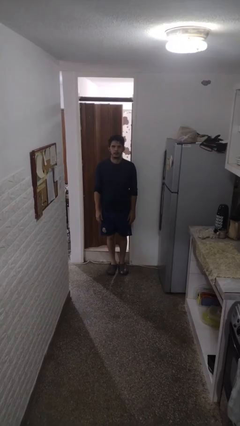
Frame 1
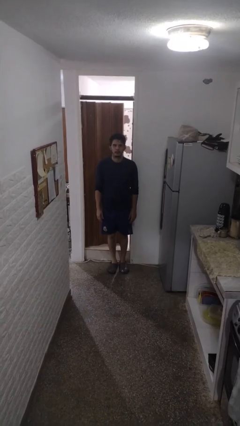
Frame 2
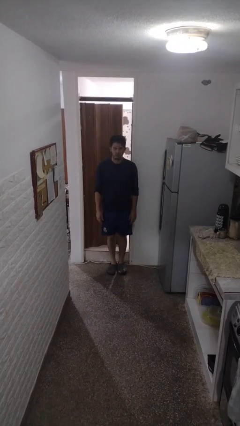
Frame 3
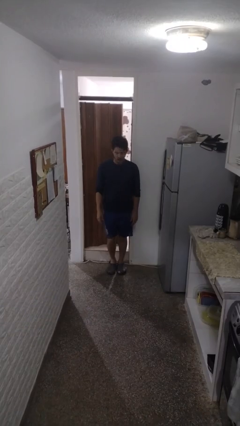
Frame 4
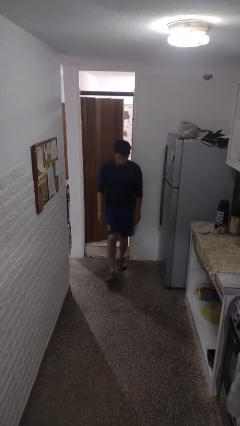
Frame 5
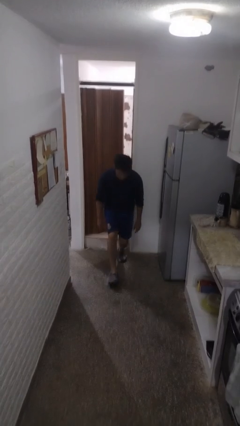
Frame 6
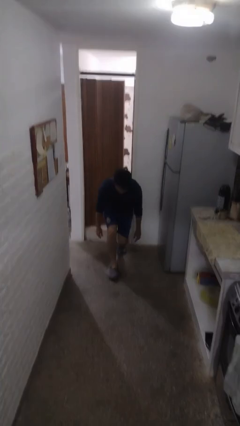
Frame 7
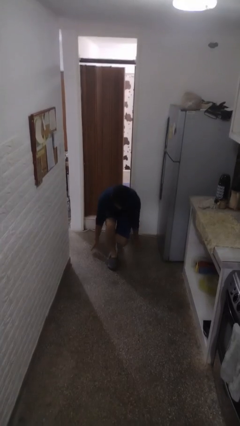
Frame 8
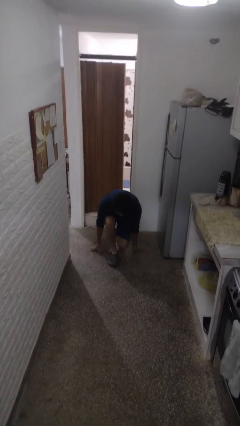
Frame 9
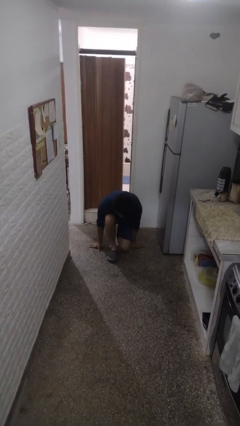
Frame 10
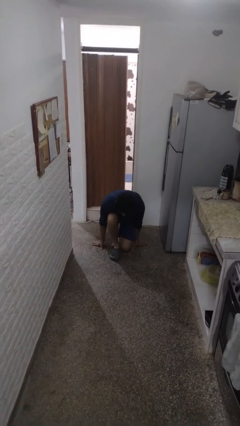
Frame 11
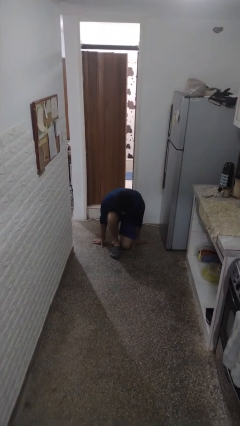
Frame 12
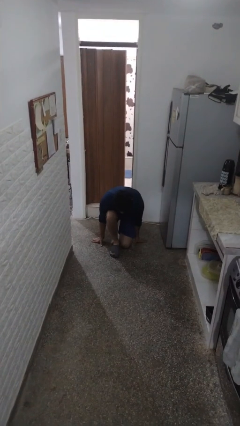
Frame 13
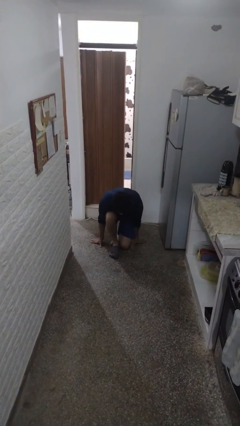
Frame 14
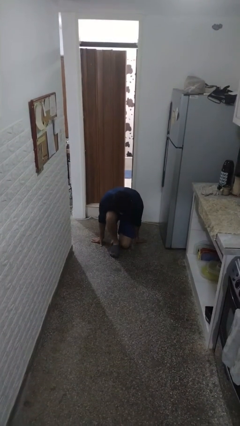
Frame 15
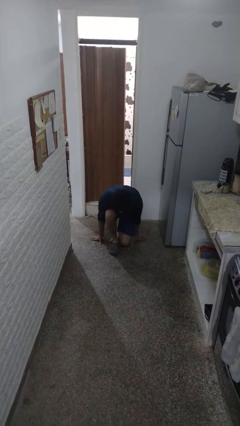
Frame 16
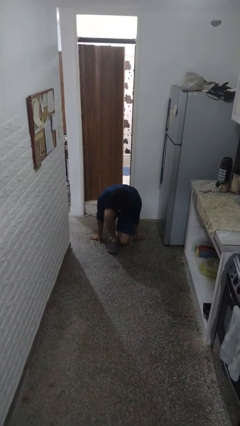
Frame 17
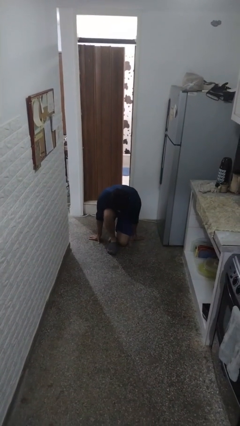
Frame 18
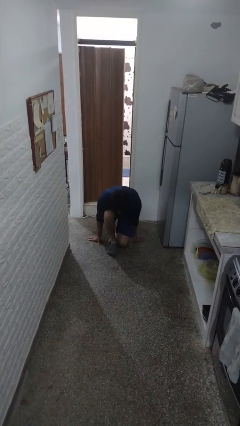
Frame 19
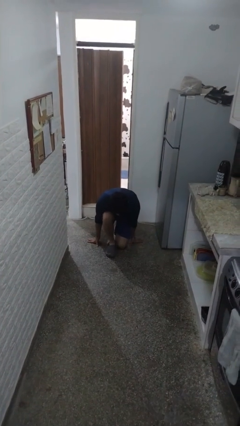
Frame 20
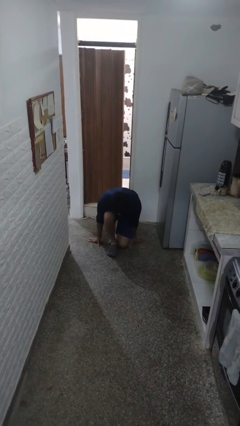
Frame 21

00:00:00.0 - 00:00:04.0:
person kneels

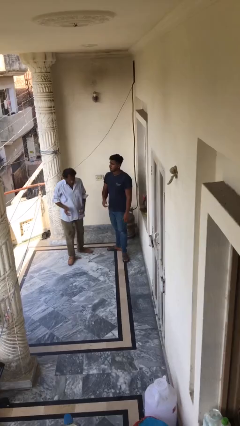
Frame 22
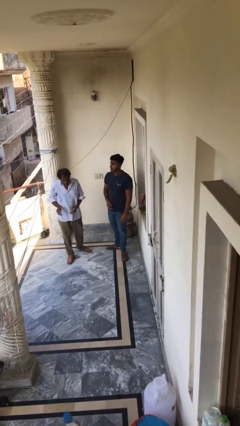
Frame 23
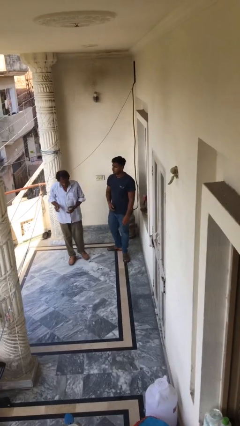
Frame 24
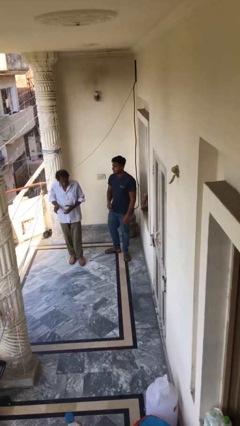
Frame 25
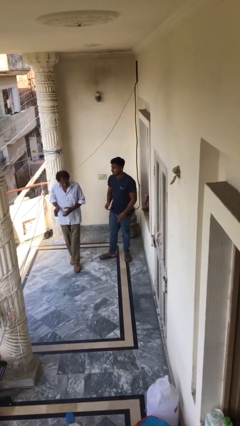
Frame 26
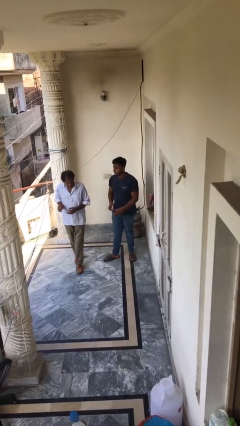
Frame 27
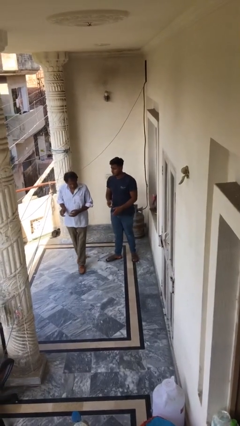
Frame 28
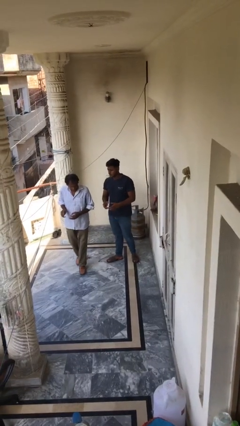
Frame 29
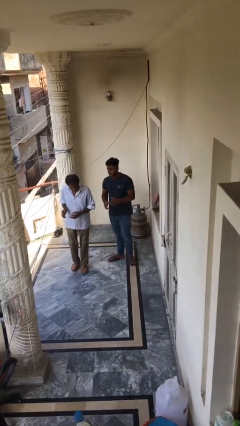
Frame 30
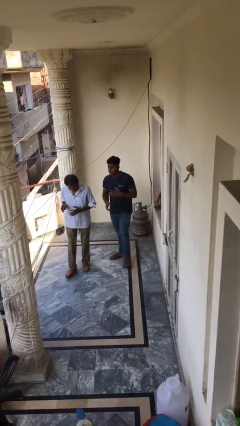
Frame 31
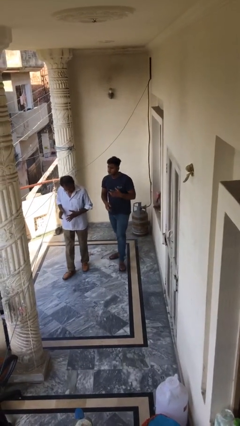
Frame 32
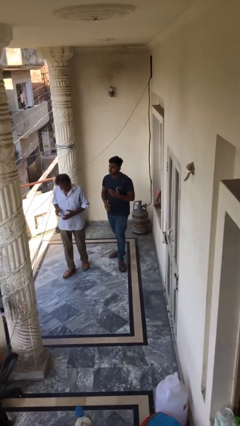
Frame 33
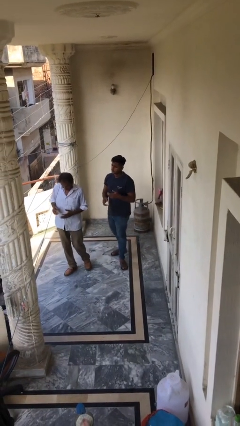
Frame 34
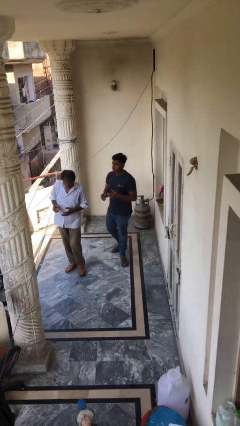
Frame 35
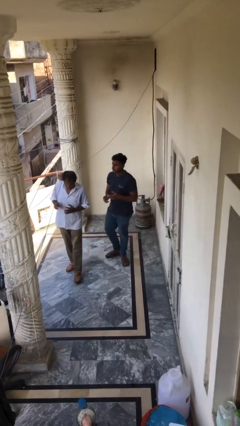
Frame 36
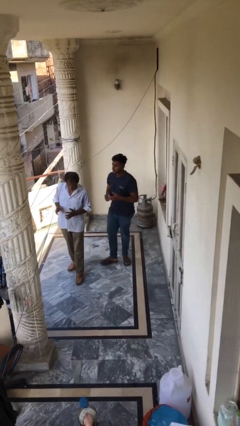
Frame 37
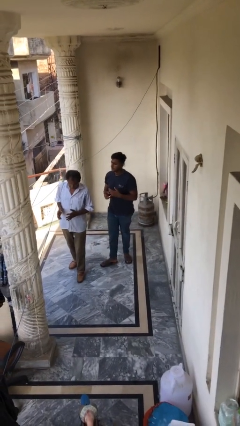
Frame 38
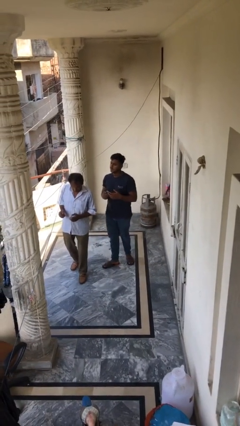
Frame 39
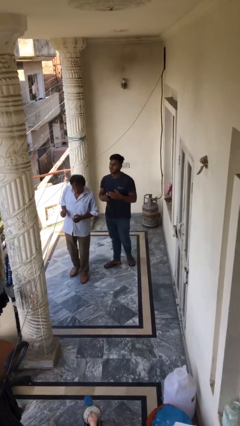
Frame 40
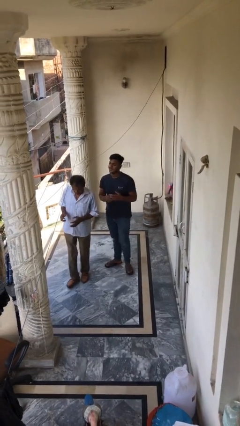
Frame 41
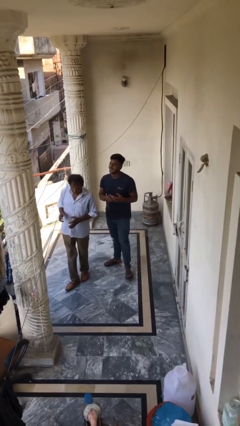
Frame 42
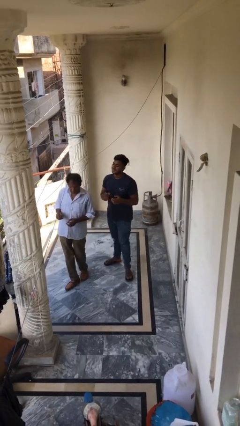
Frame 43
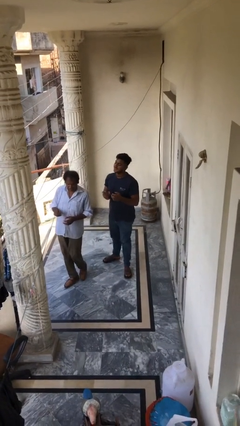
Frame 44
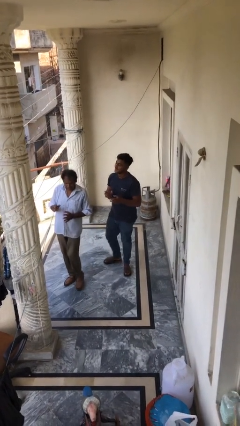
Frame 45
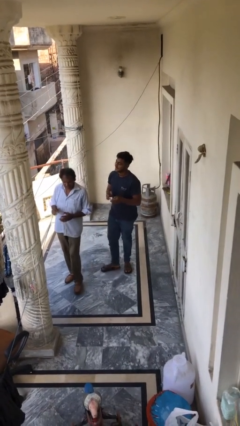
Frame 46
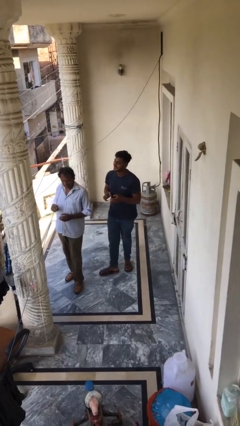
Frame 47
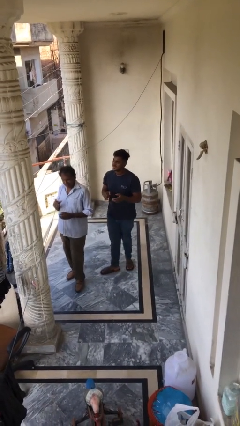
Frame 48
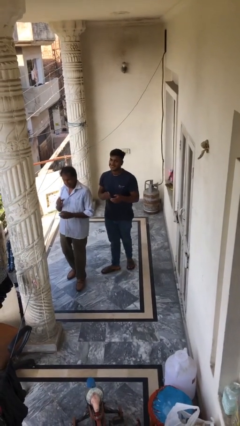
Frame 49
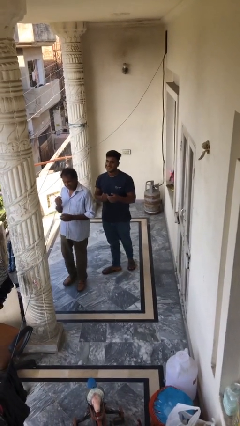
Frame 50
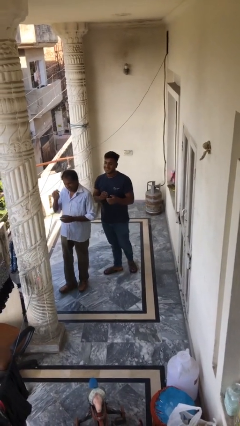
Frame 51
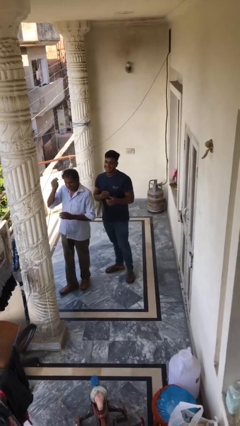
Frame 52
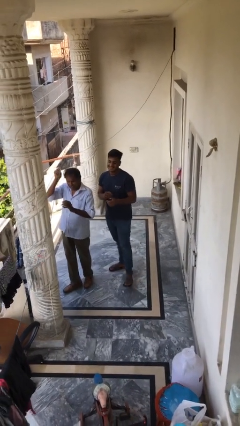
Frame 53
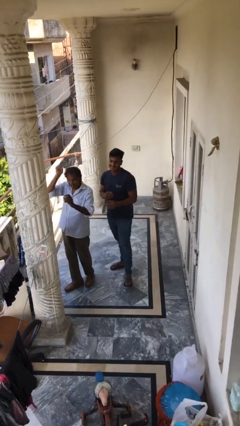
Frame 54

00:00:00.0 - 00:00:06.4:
person talks to person

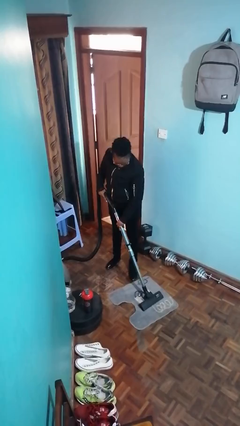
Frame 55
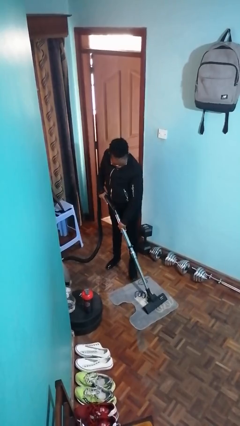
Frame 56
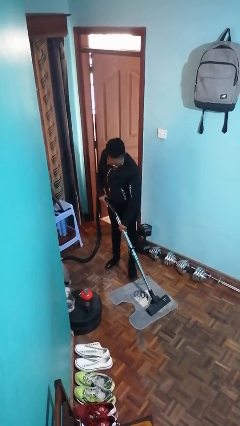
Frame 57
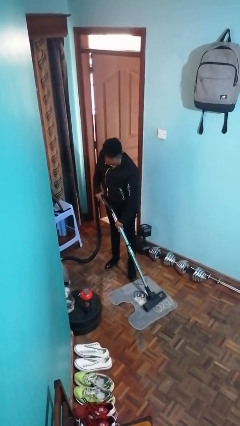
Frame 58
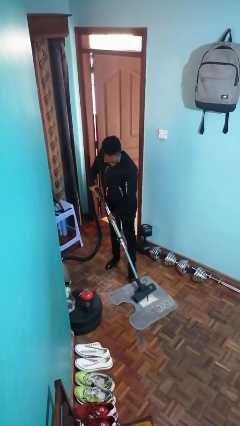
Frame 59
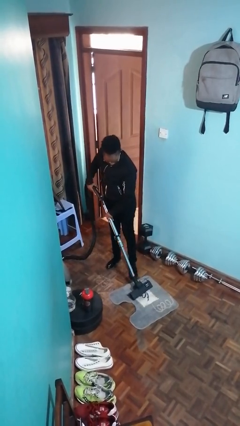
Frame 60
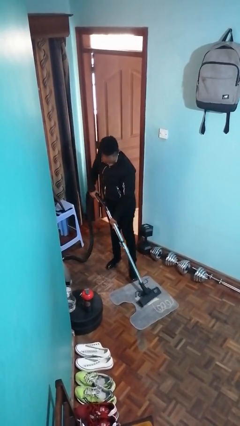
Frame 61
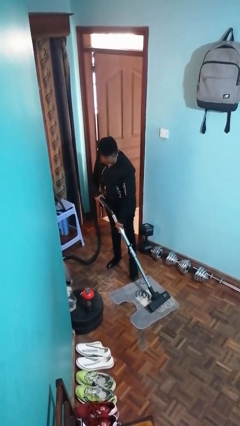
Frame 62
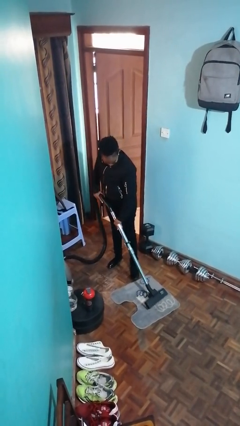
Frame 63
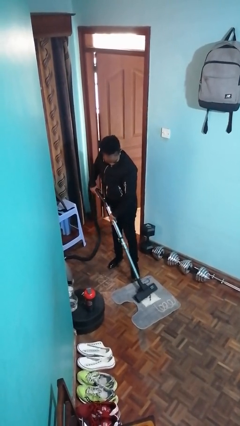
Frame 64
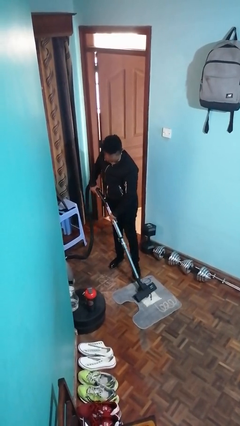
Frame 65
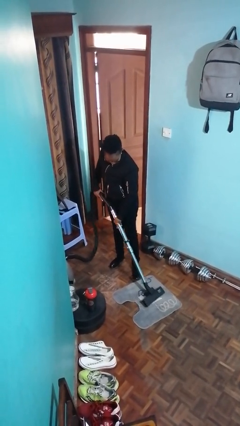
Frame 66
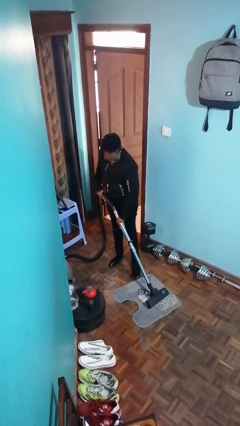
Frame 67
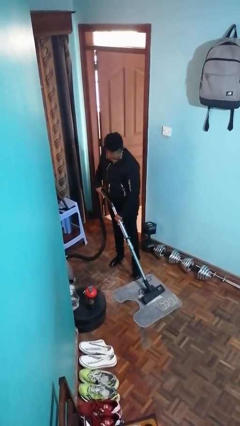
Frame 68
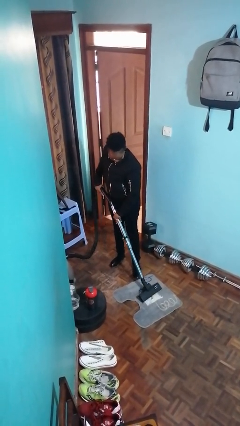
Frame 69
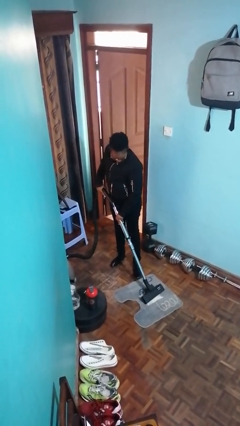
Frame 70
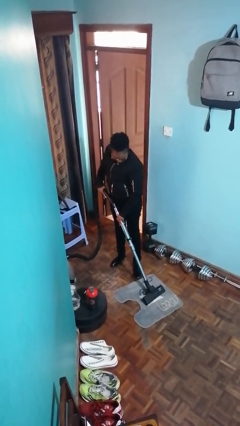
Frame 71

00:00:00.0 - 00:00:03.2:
person vacuums carpet

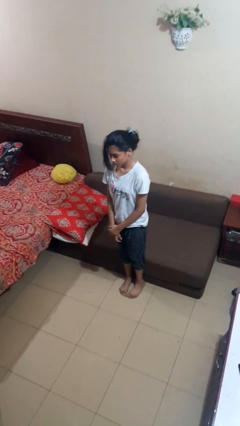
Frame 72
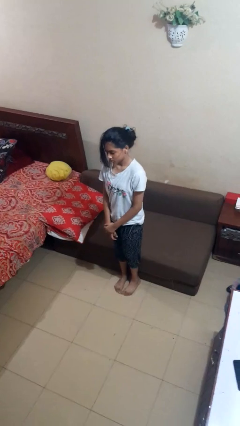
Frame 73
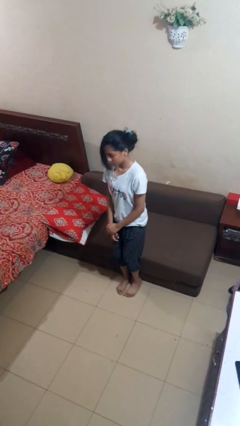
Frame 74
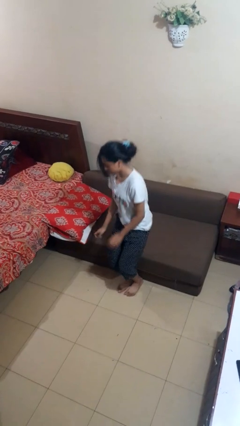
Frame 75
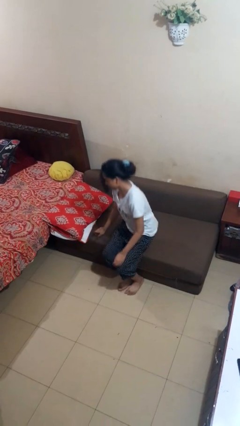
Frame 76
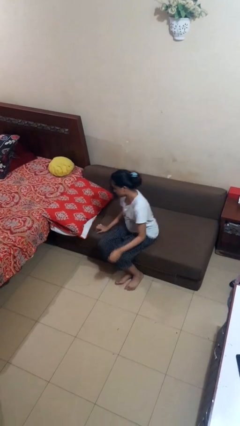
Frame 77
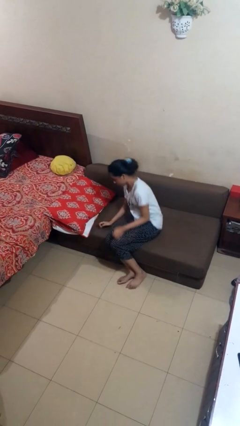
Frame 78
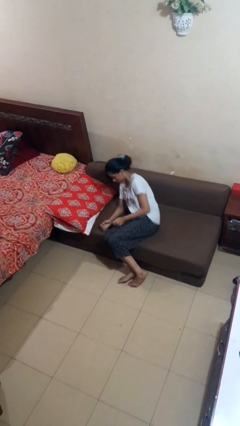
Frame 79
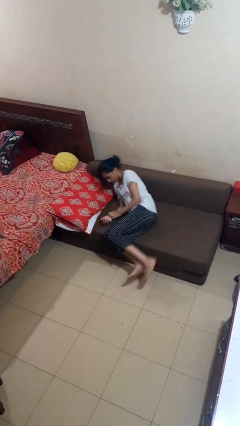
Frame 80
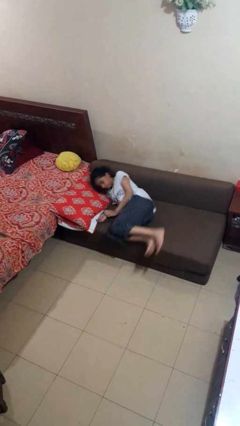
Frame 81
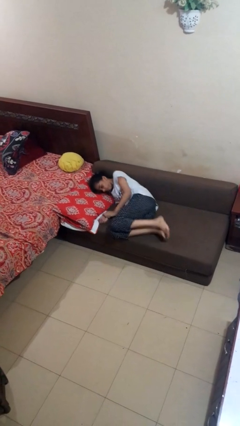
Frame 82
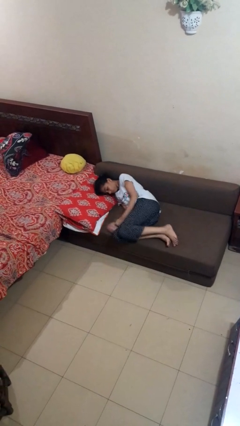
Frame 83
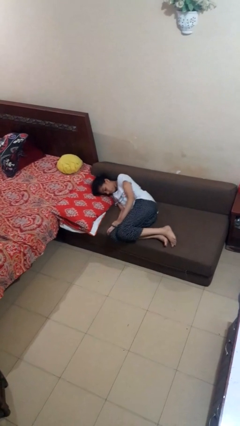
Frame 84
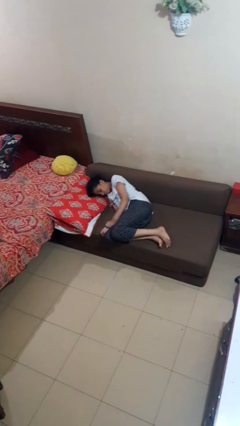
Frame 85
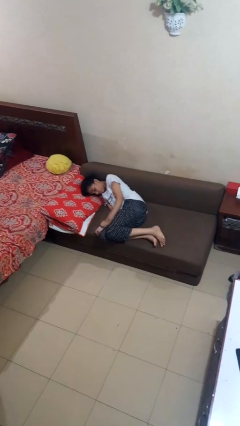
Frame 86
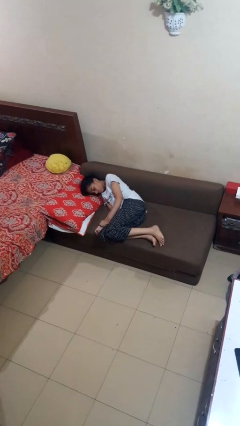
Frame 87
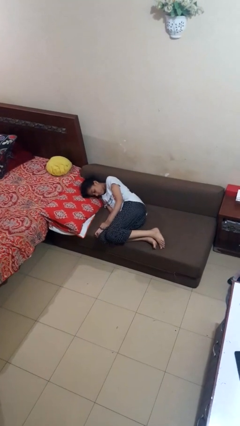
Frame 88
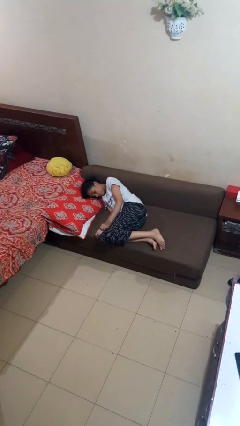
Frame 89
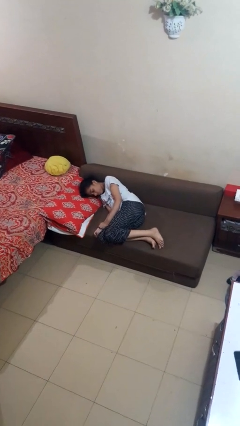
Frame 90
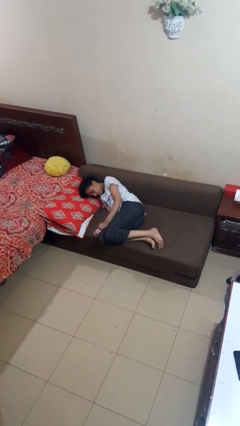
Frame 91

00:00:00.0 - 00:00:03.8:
person lies down on couch

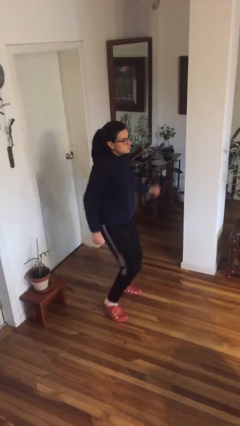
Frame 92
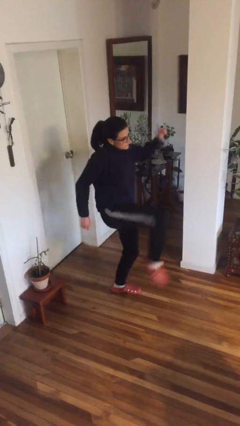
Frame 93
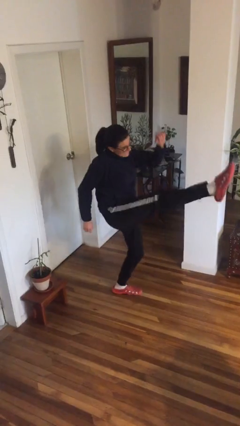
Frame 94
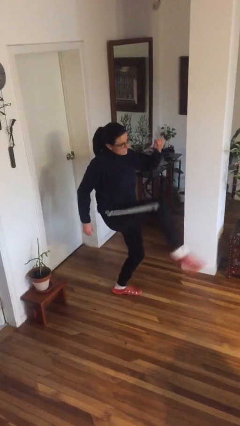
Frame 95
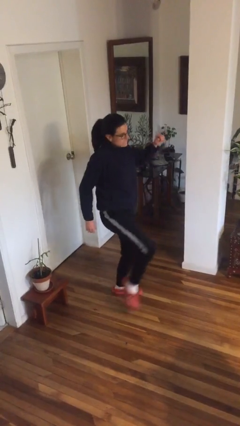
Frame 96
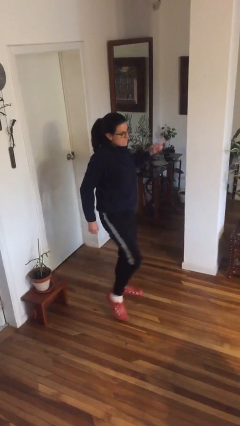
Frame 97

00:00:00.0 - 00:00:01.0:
person karate kicks
